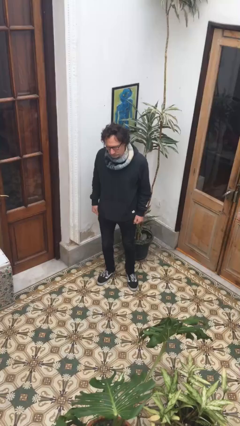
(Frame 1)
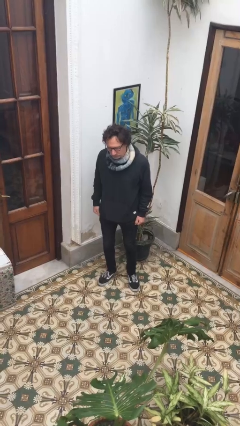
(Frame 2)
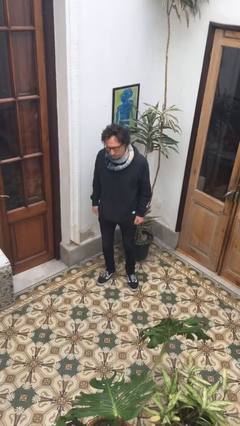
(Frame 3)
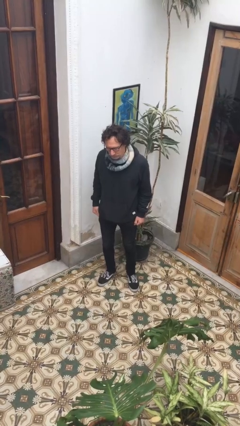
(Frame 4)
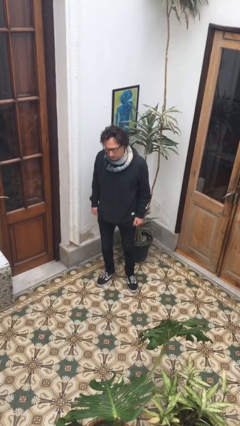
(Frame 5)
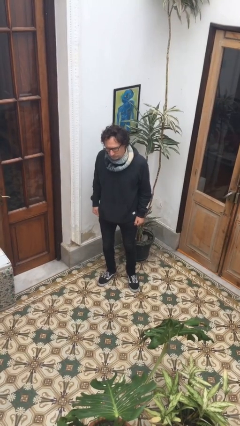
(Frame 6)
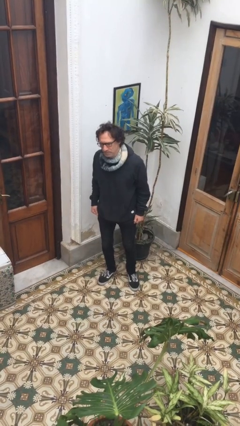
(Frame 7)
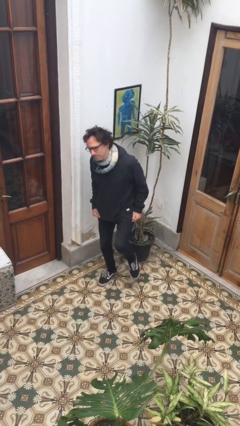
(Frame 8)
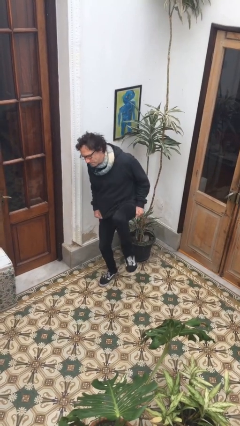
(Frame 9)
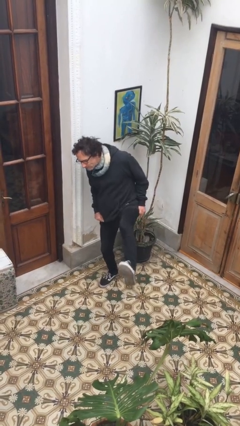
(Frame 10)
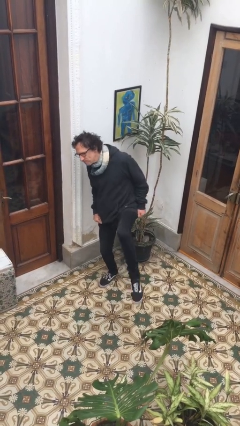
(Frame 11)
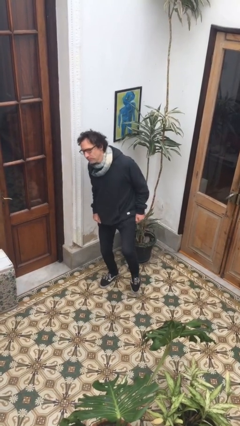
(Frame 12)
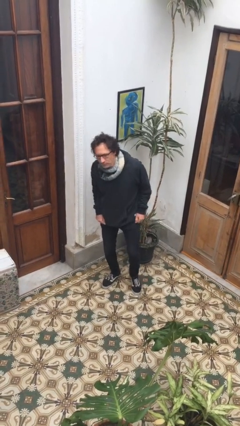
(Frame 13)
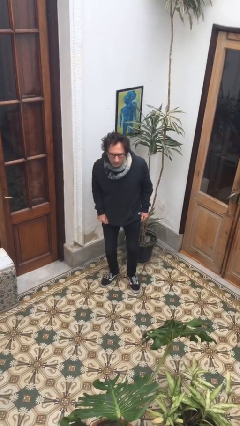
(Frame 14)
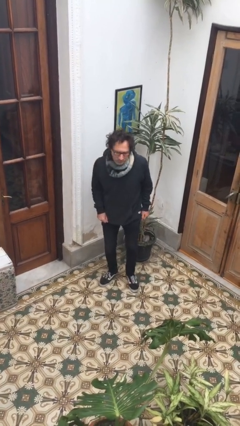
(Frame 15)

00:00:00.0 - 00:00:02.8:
person karate kicks

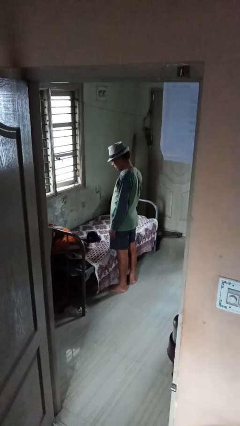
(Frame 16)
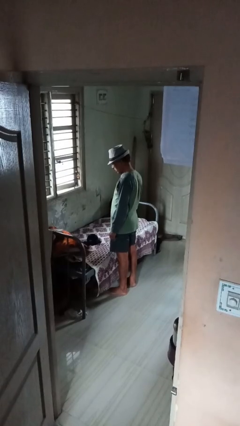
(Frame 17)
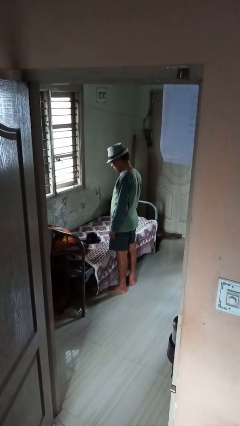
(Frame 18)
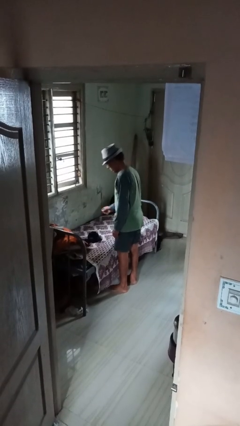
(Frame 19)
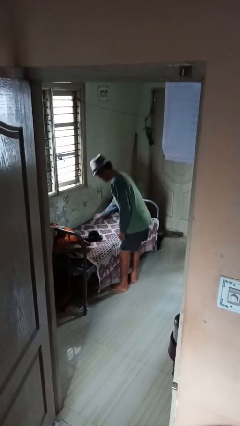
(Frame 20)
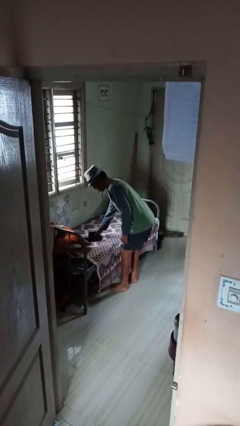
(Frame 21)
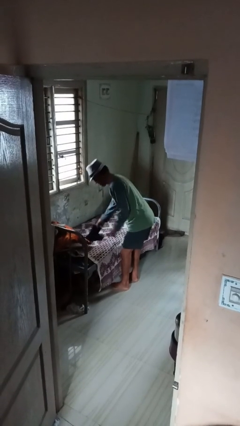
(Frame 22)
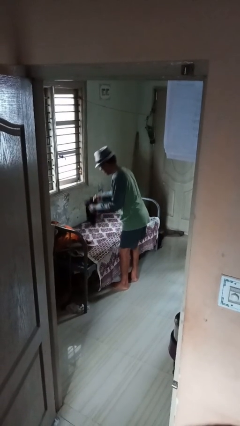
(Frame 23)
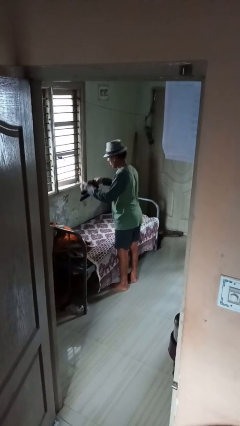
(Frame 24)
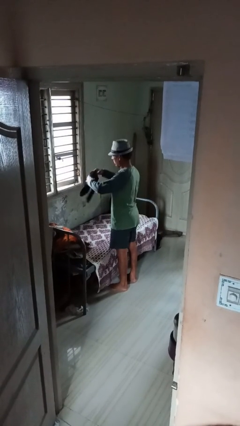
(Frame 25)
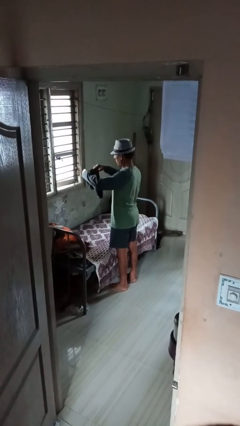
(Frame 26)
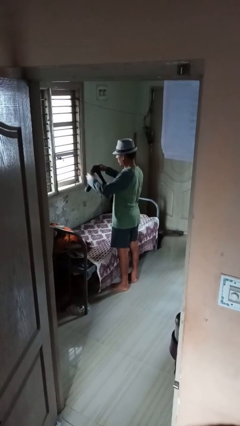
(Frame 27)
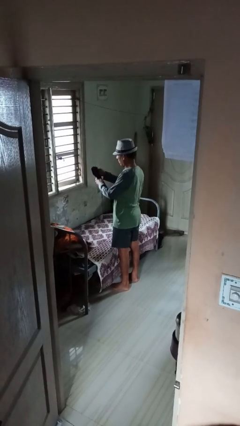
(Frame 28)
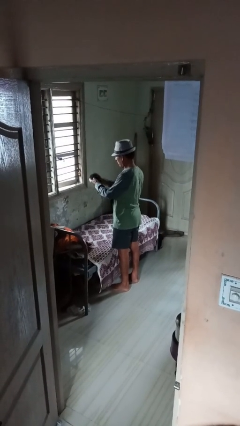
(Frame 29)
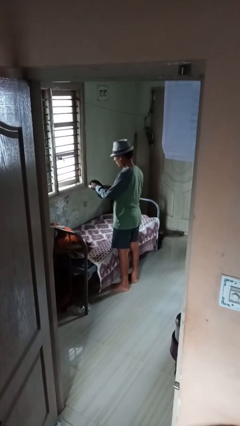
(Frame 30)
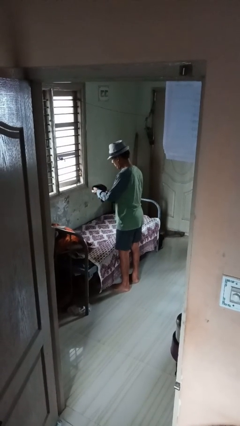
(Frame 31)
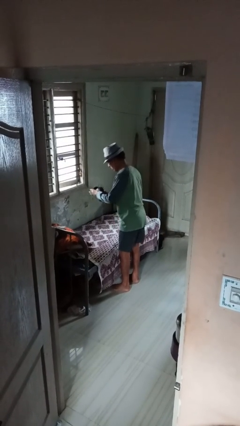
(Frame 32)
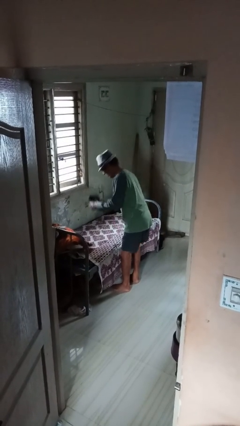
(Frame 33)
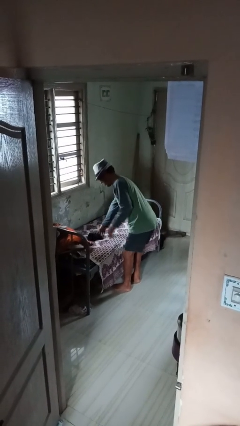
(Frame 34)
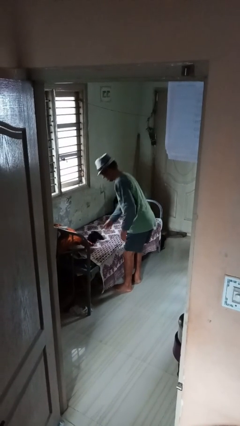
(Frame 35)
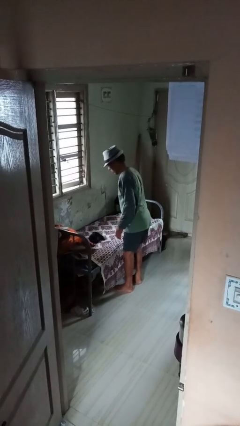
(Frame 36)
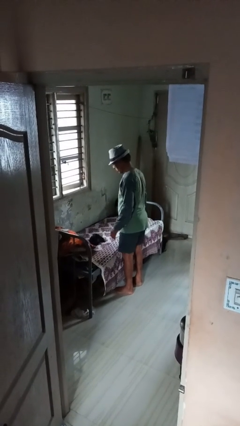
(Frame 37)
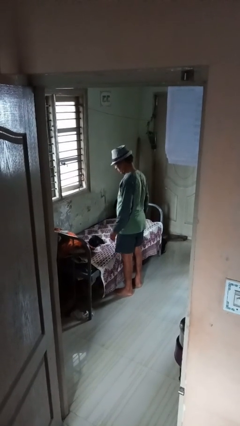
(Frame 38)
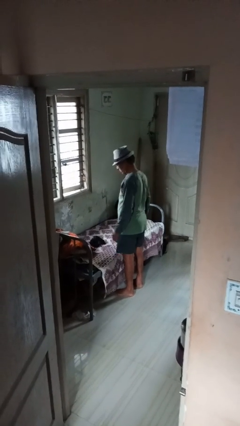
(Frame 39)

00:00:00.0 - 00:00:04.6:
person folds socks

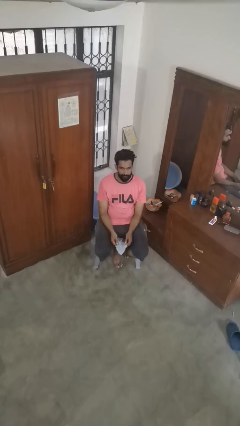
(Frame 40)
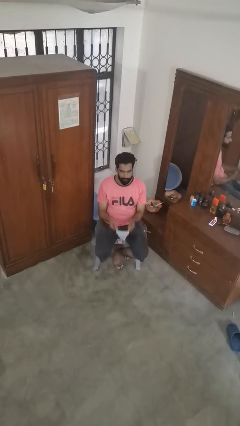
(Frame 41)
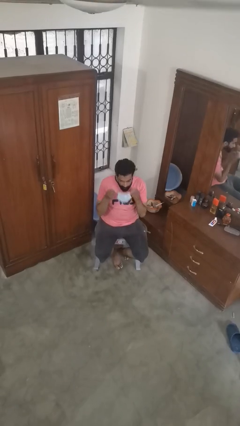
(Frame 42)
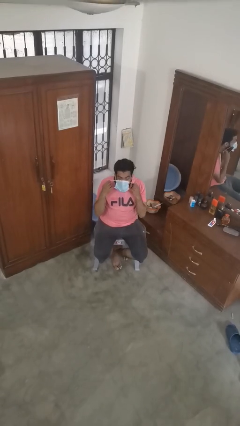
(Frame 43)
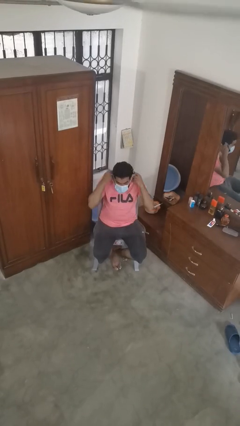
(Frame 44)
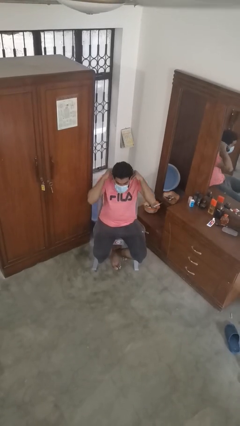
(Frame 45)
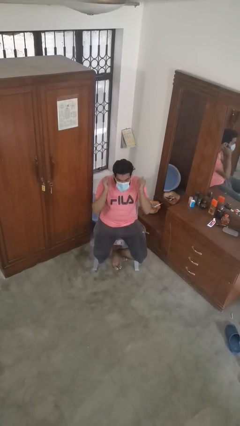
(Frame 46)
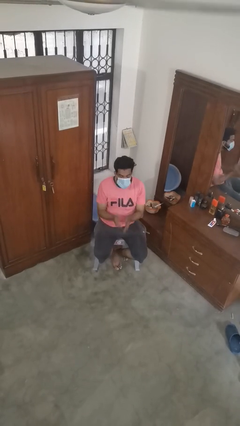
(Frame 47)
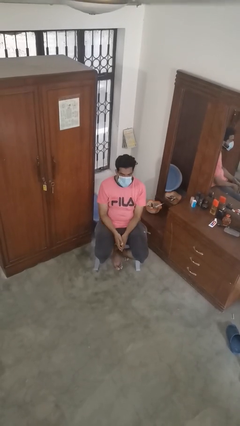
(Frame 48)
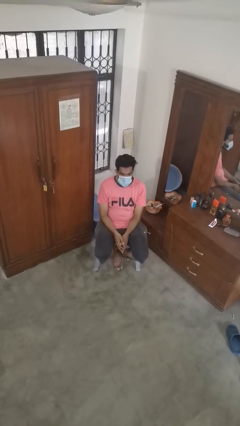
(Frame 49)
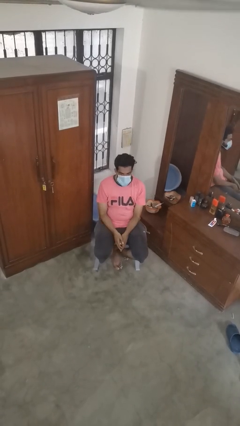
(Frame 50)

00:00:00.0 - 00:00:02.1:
person puts on facemask

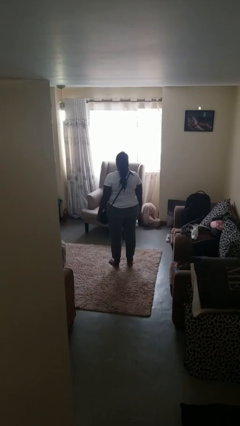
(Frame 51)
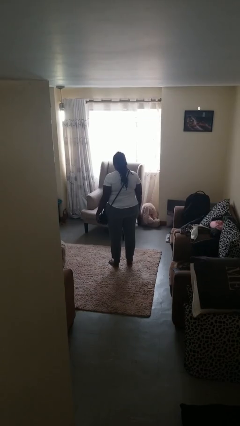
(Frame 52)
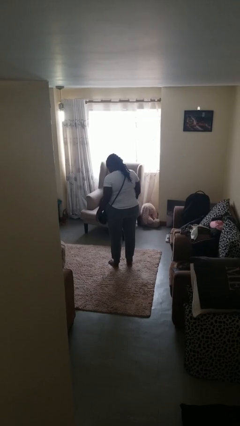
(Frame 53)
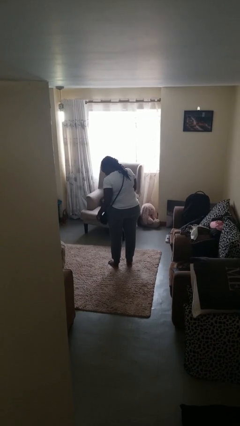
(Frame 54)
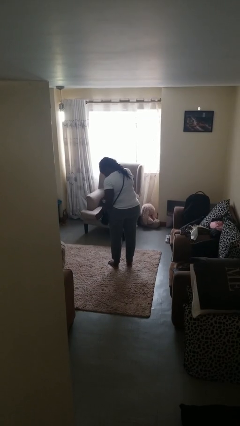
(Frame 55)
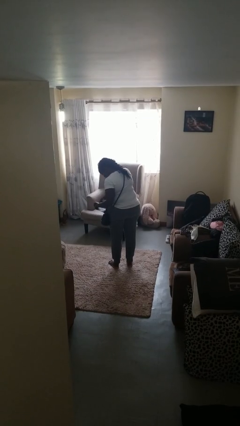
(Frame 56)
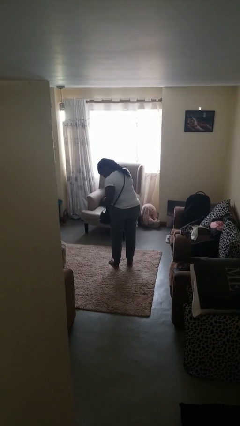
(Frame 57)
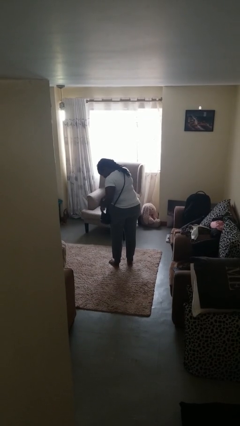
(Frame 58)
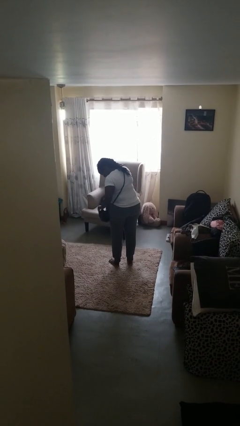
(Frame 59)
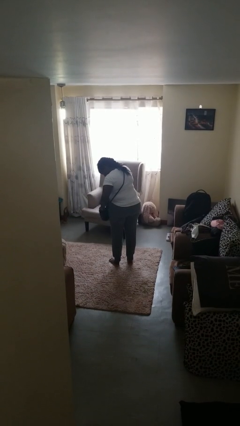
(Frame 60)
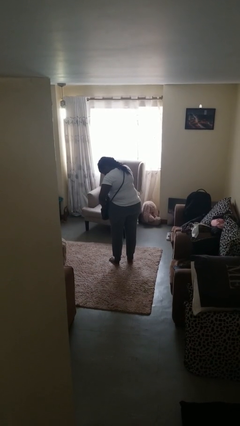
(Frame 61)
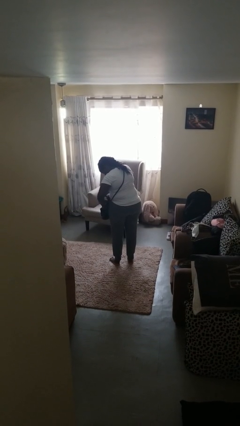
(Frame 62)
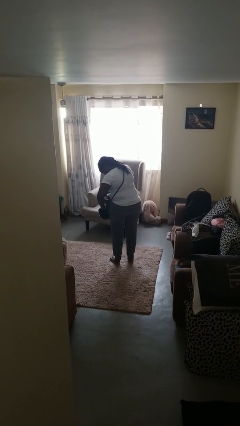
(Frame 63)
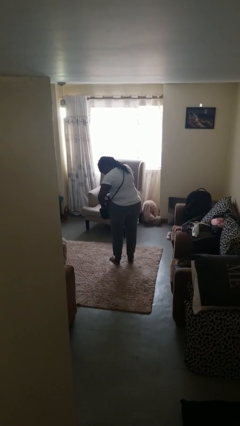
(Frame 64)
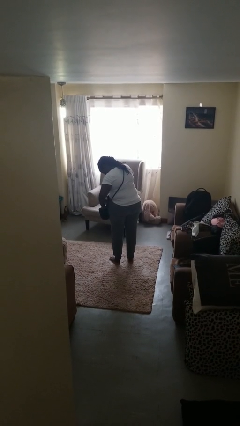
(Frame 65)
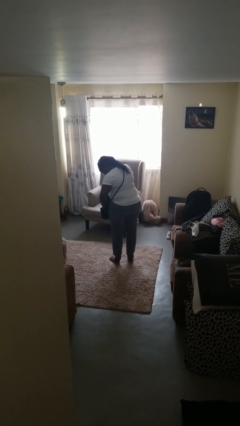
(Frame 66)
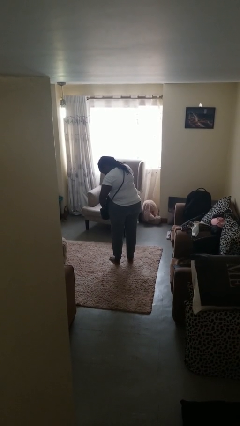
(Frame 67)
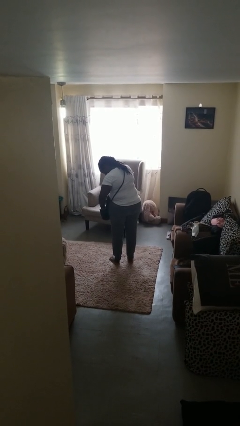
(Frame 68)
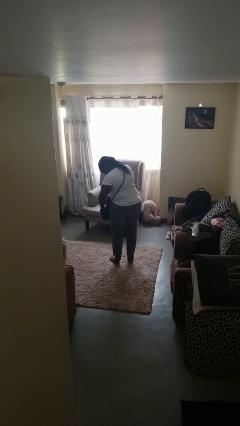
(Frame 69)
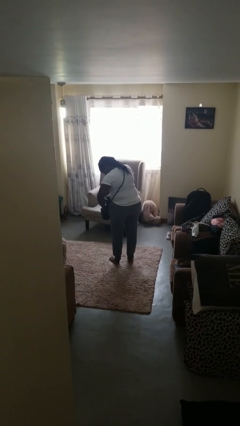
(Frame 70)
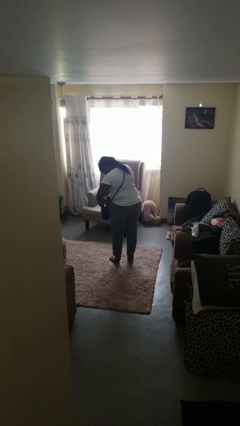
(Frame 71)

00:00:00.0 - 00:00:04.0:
person searches in purse

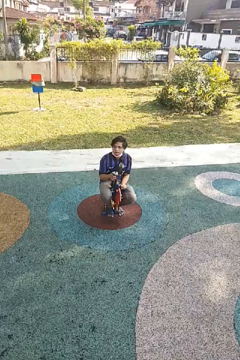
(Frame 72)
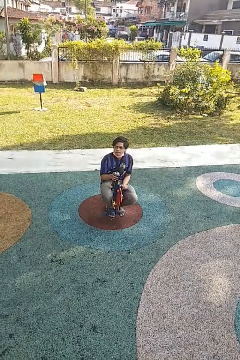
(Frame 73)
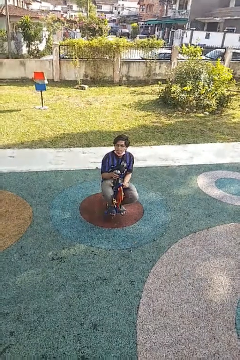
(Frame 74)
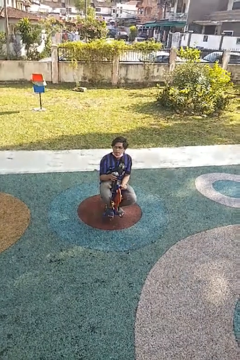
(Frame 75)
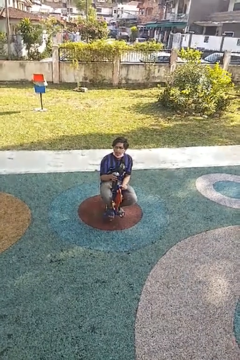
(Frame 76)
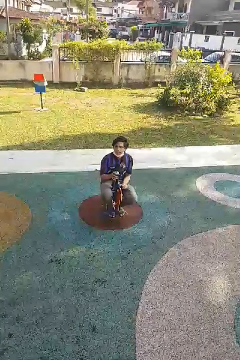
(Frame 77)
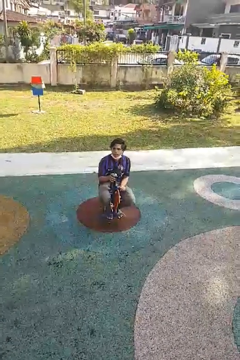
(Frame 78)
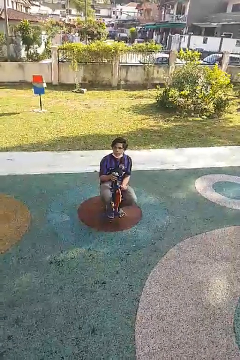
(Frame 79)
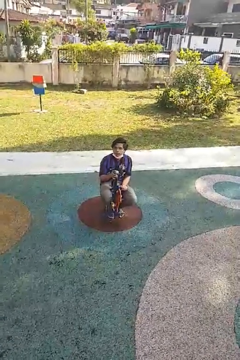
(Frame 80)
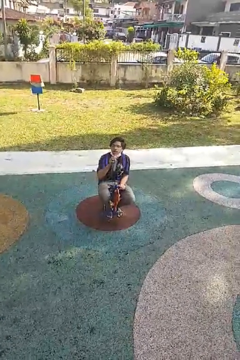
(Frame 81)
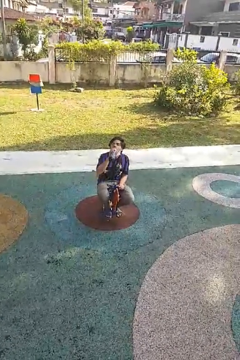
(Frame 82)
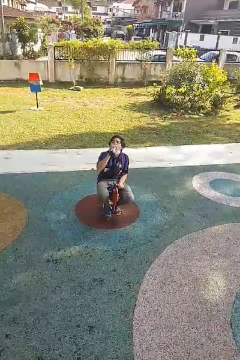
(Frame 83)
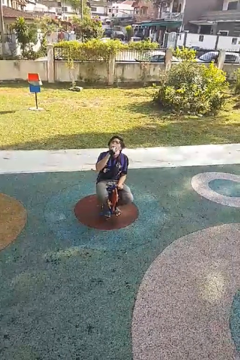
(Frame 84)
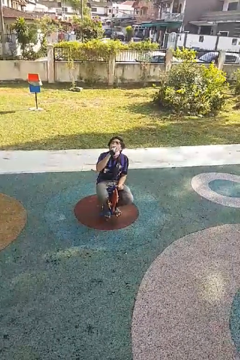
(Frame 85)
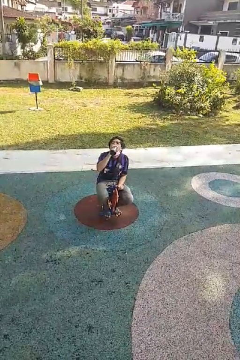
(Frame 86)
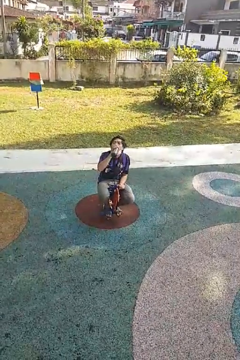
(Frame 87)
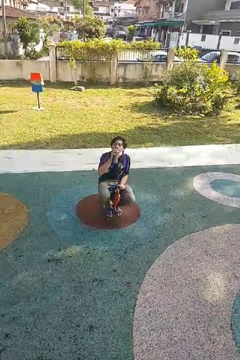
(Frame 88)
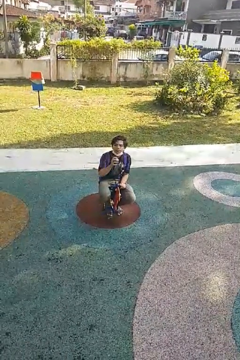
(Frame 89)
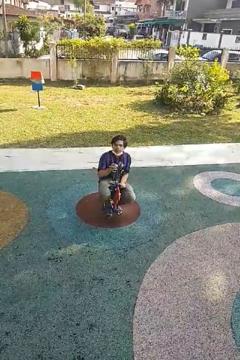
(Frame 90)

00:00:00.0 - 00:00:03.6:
person drinks from bottle

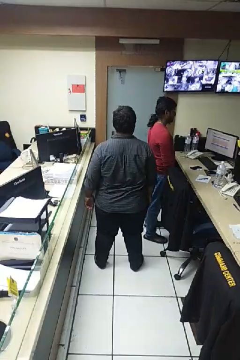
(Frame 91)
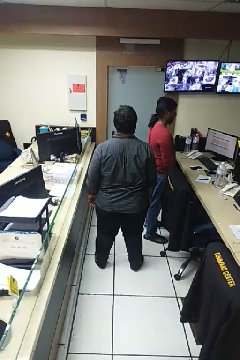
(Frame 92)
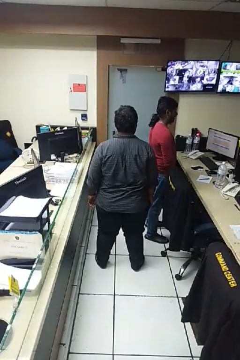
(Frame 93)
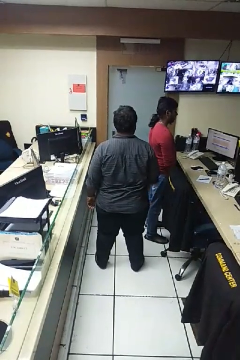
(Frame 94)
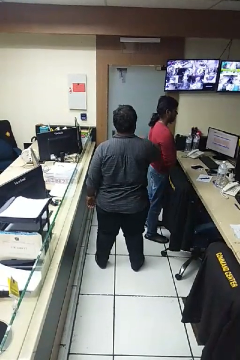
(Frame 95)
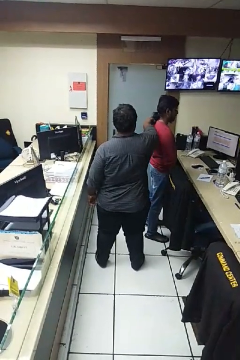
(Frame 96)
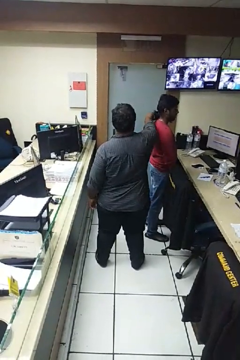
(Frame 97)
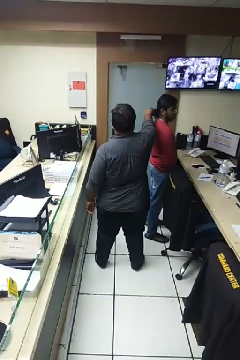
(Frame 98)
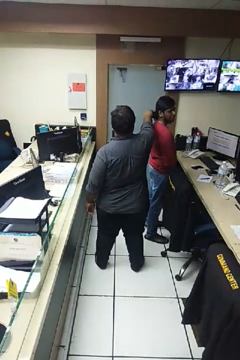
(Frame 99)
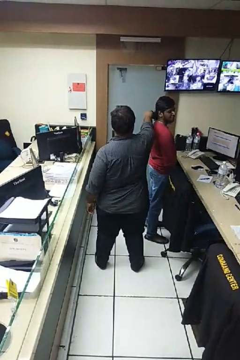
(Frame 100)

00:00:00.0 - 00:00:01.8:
person grabs person by hair
